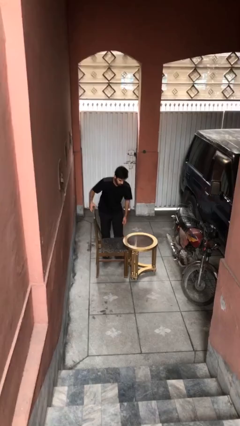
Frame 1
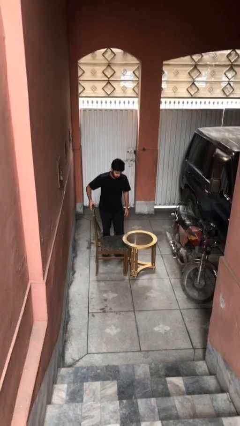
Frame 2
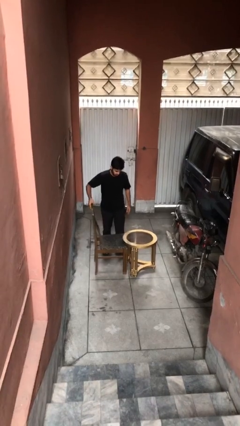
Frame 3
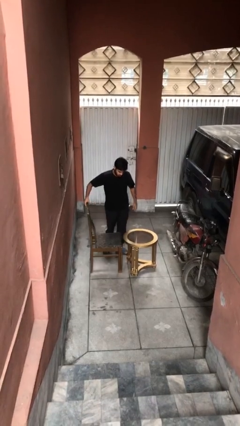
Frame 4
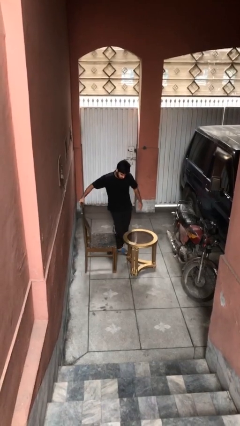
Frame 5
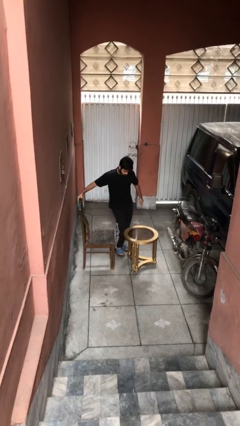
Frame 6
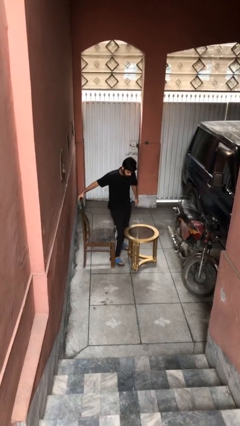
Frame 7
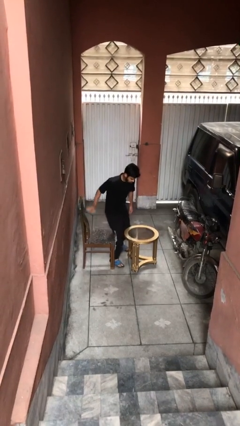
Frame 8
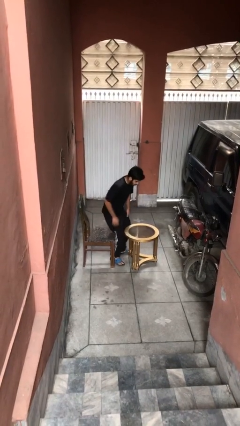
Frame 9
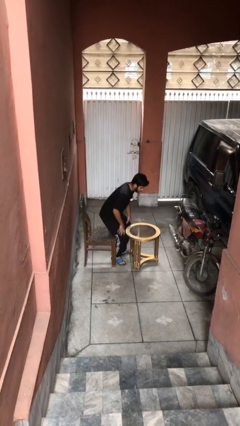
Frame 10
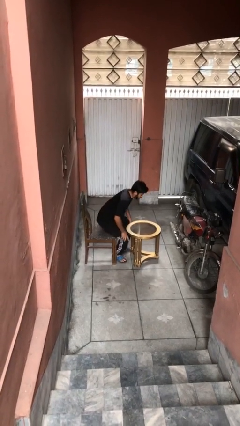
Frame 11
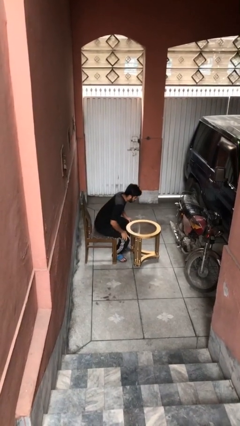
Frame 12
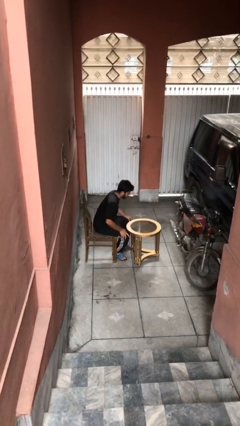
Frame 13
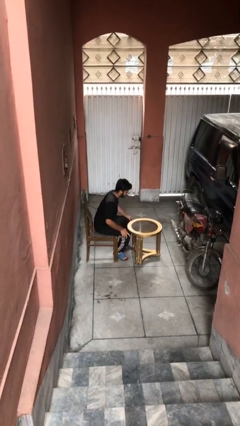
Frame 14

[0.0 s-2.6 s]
person sits down

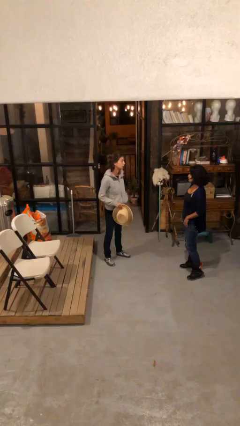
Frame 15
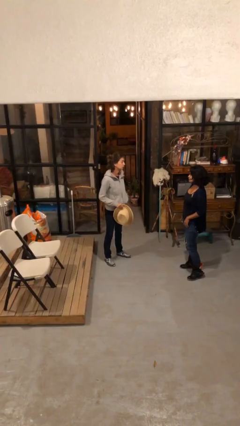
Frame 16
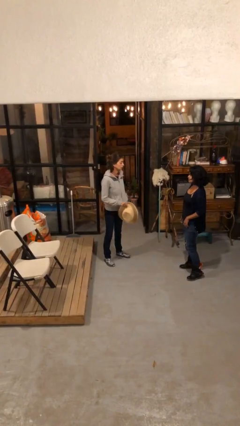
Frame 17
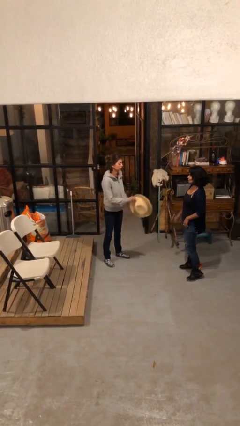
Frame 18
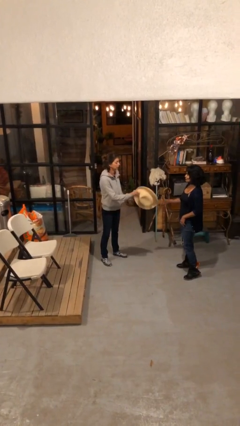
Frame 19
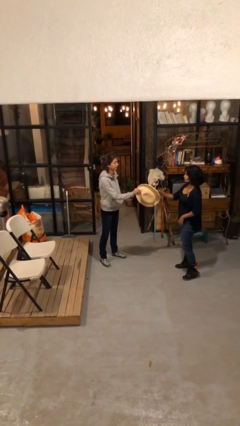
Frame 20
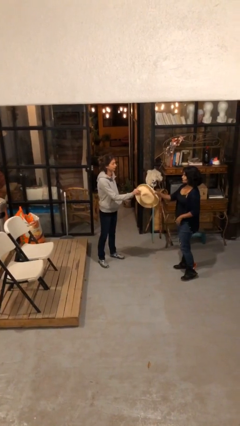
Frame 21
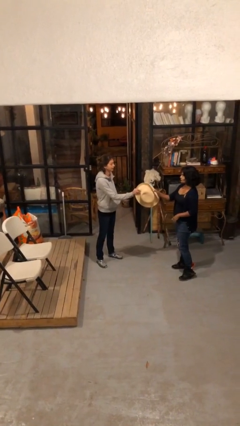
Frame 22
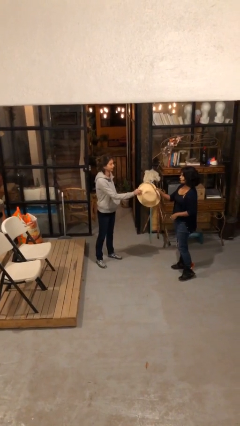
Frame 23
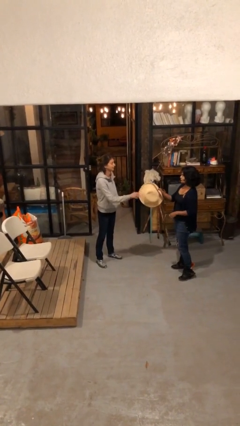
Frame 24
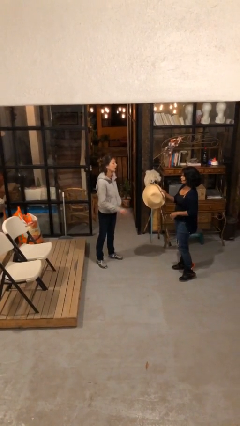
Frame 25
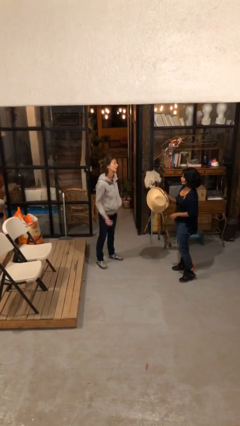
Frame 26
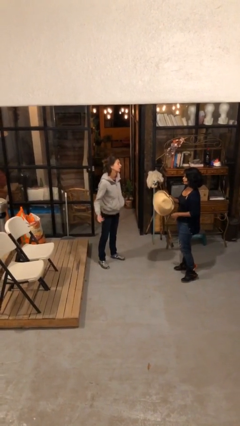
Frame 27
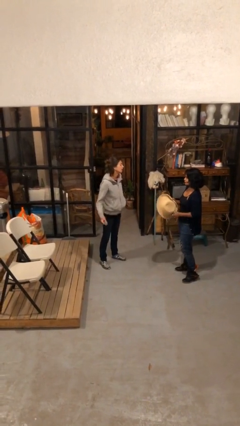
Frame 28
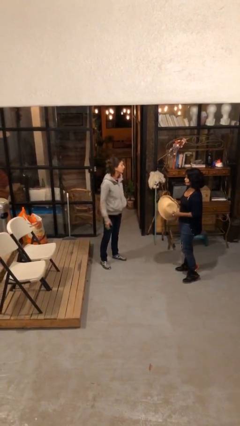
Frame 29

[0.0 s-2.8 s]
person transfers object to person

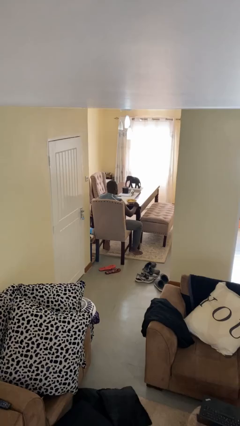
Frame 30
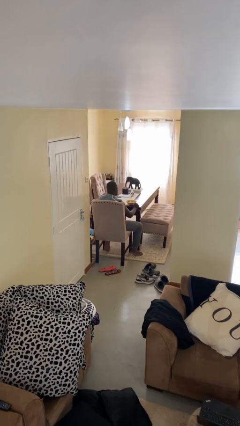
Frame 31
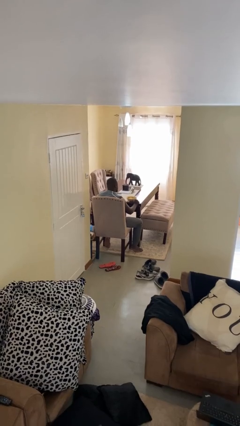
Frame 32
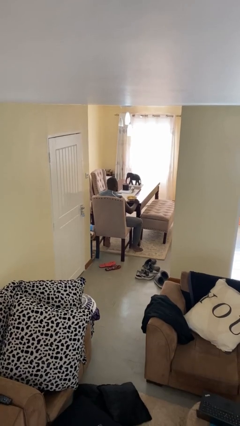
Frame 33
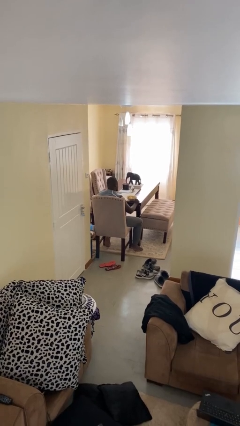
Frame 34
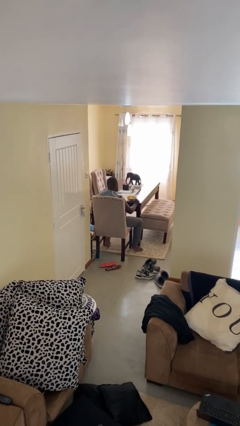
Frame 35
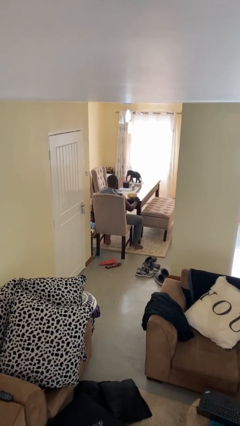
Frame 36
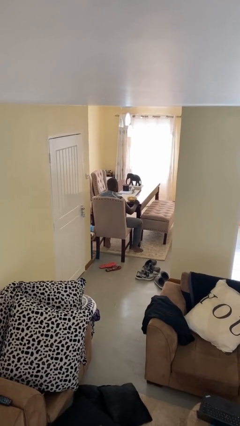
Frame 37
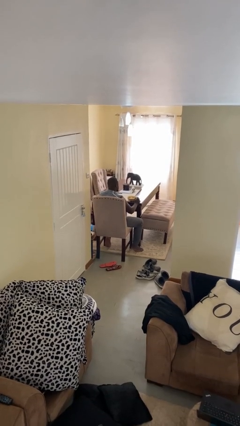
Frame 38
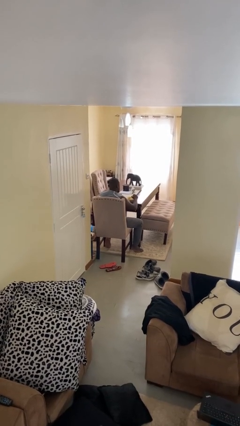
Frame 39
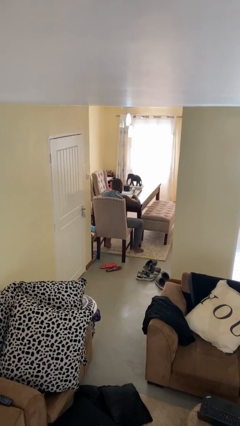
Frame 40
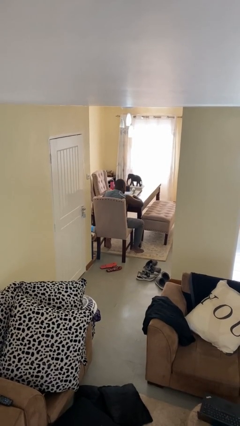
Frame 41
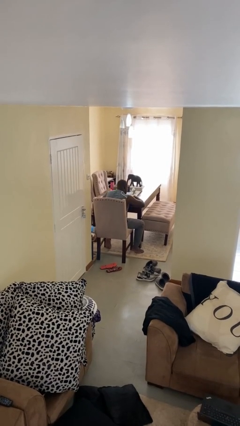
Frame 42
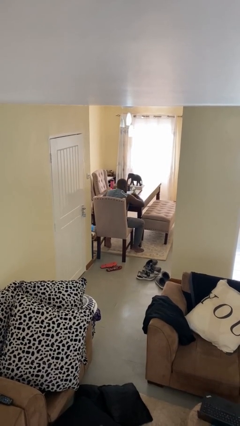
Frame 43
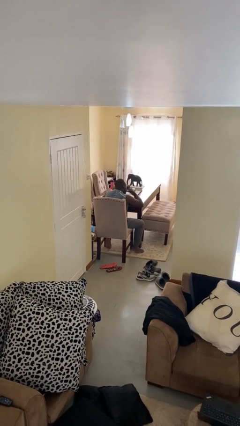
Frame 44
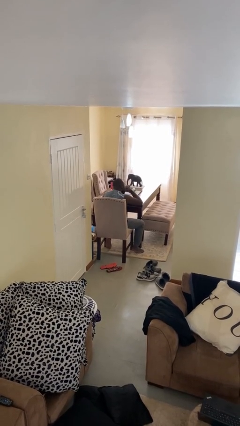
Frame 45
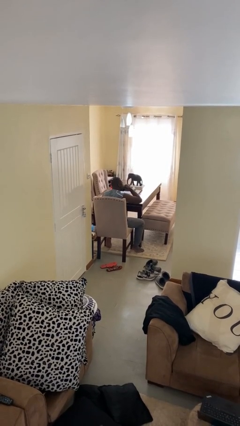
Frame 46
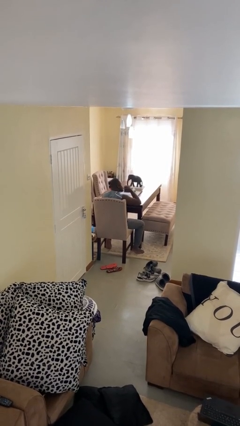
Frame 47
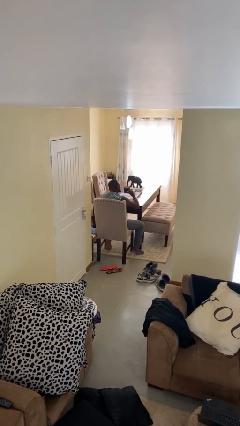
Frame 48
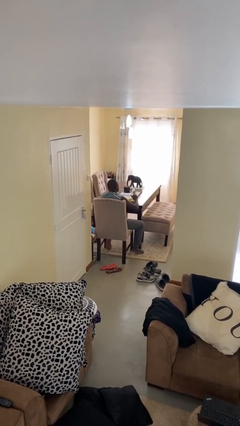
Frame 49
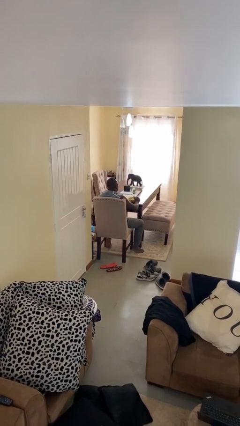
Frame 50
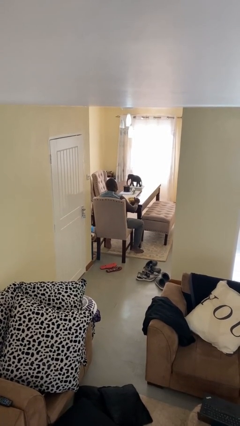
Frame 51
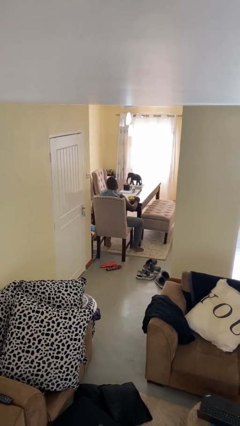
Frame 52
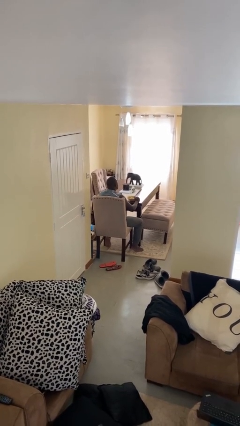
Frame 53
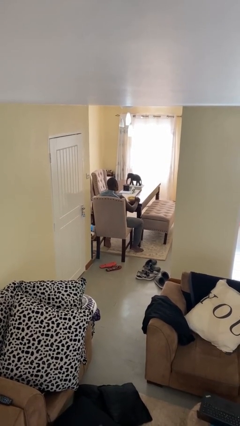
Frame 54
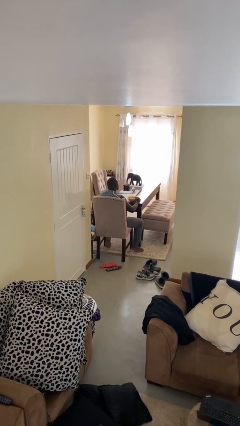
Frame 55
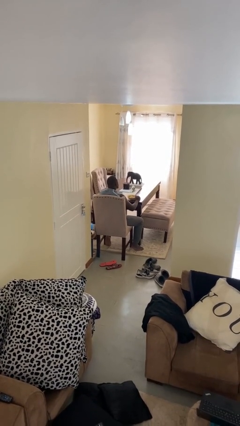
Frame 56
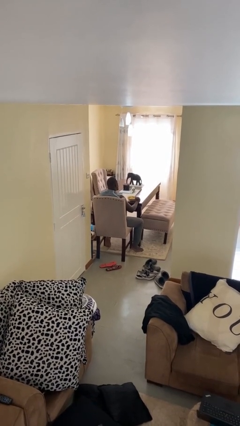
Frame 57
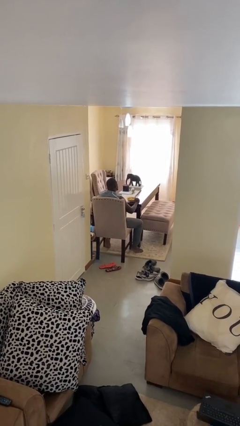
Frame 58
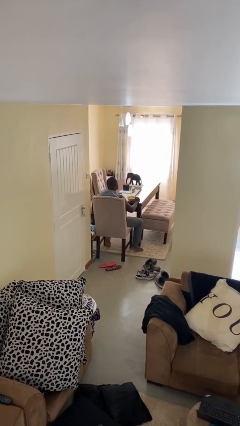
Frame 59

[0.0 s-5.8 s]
person eats with hands

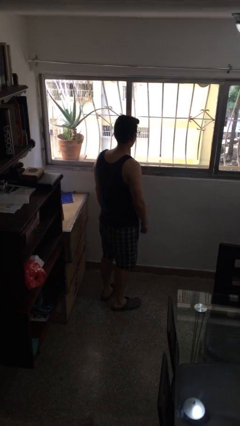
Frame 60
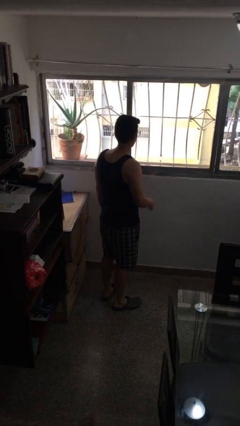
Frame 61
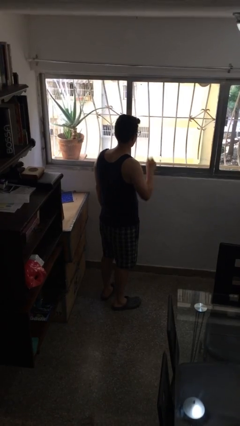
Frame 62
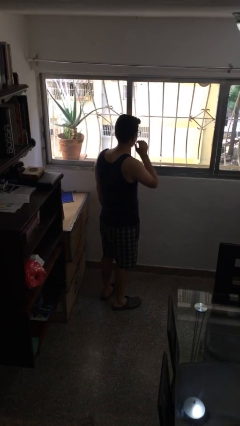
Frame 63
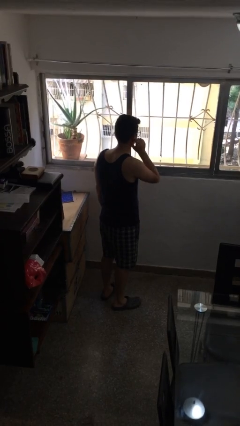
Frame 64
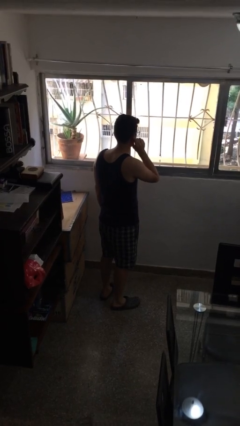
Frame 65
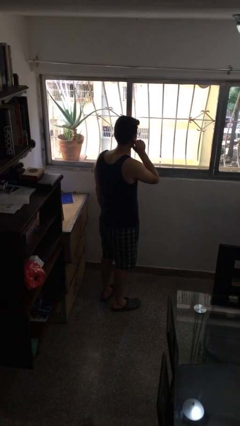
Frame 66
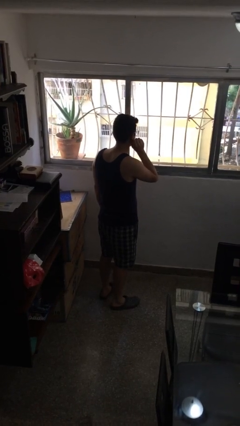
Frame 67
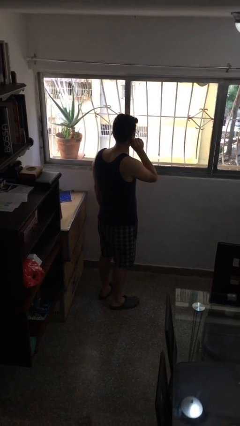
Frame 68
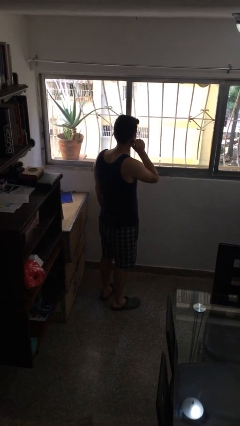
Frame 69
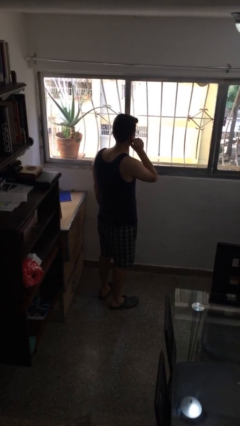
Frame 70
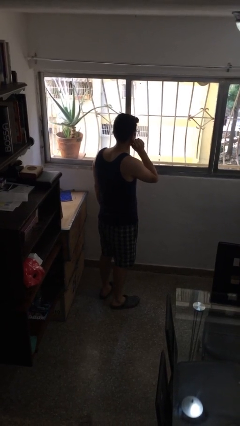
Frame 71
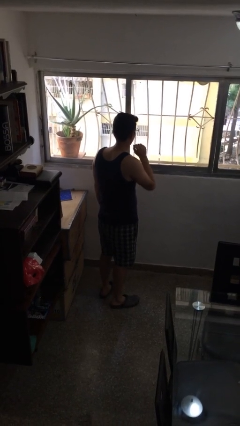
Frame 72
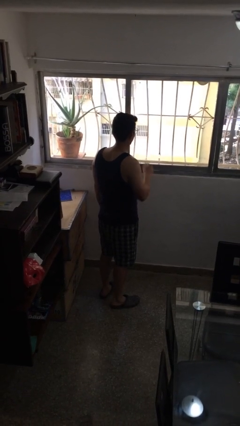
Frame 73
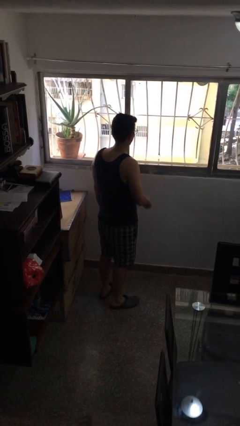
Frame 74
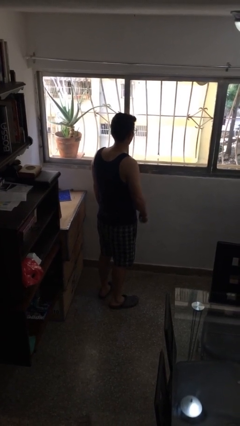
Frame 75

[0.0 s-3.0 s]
person touches earlobe

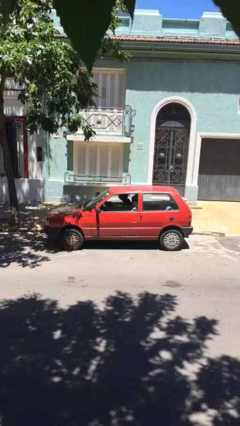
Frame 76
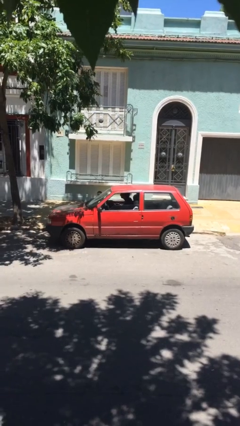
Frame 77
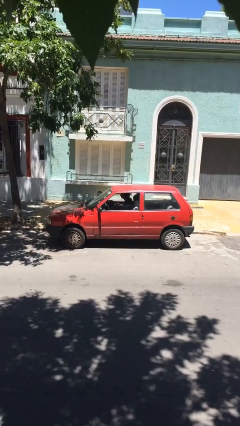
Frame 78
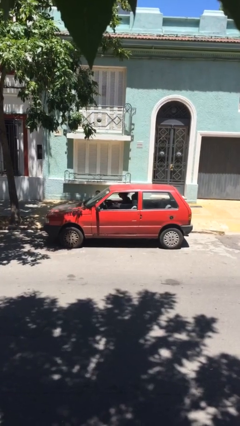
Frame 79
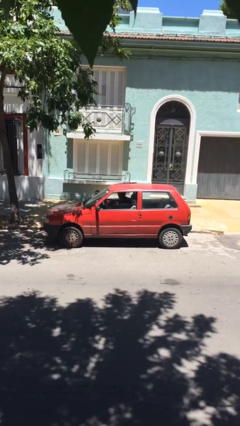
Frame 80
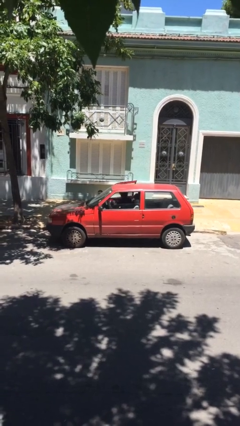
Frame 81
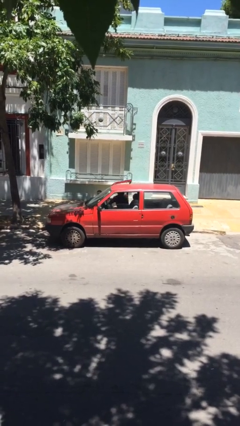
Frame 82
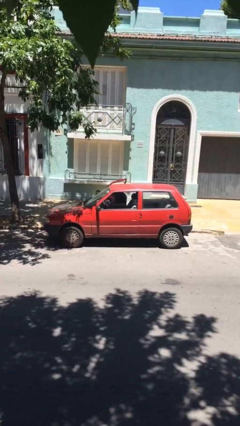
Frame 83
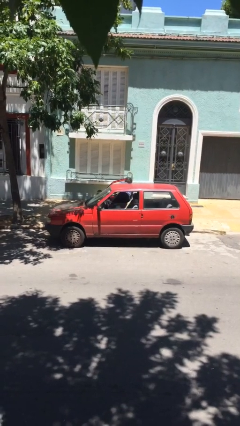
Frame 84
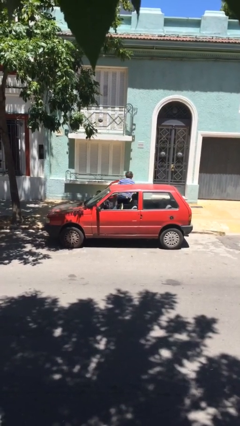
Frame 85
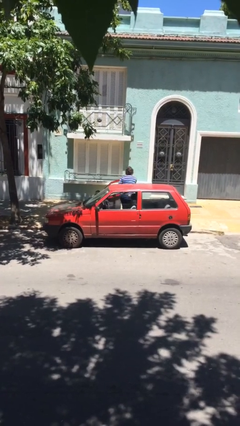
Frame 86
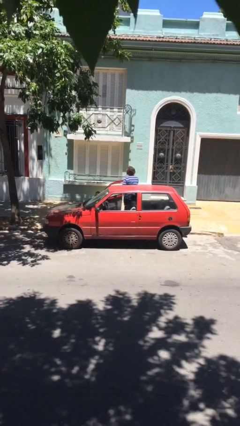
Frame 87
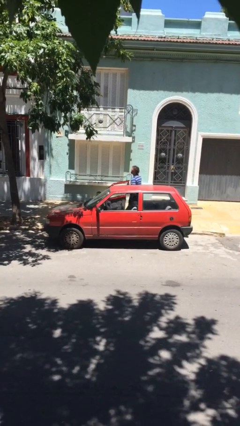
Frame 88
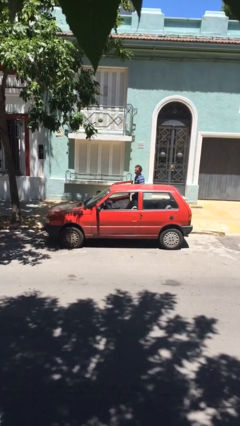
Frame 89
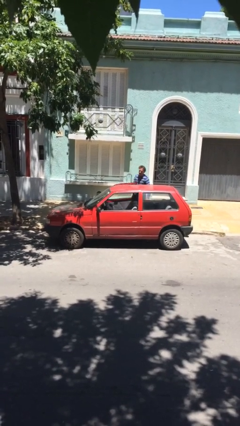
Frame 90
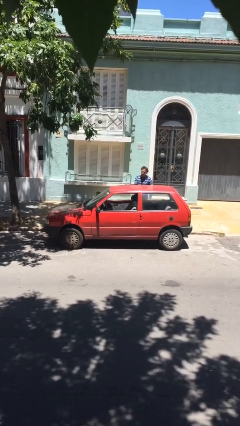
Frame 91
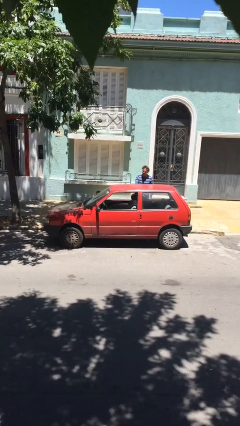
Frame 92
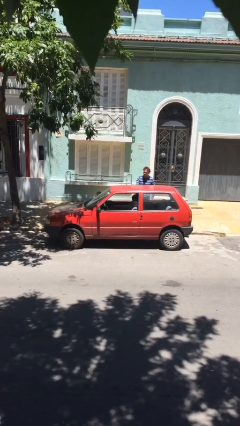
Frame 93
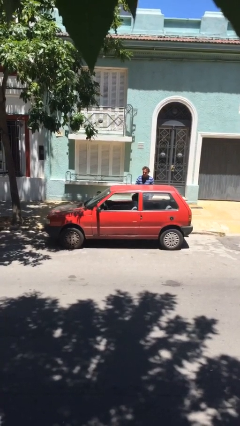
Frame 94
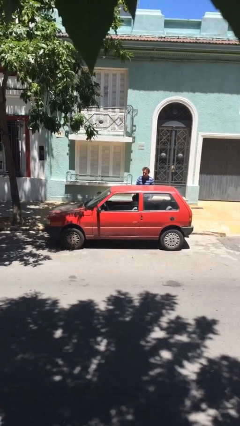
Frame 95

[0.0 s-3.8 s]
car drops off person
